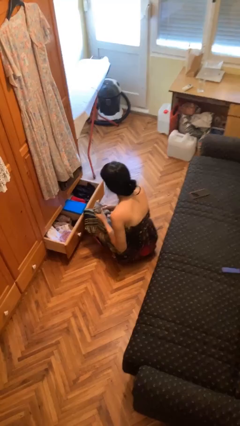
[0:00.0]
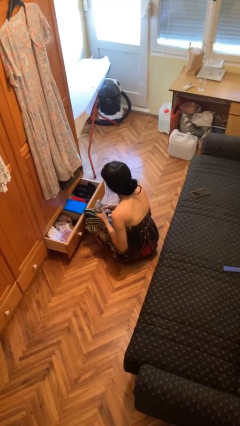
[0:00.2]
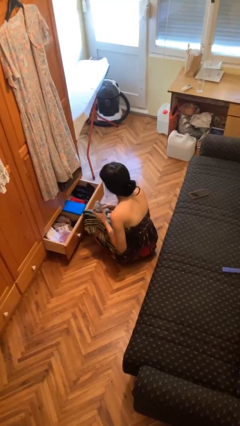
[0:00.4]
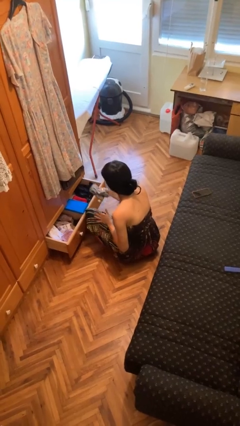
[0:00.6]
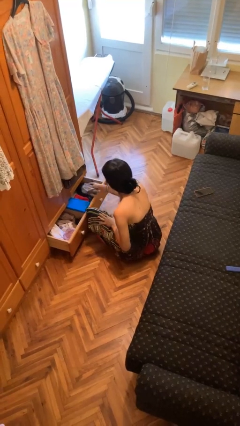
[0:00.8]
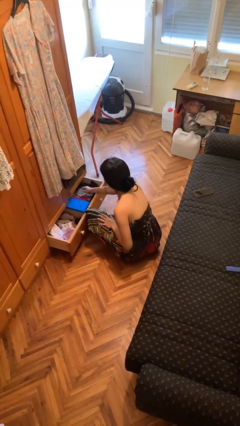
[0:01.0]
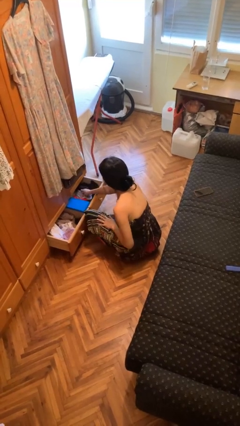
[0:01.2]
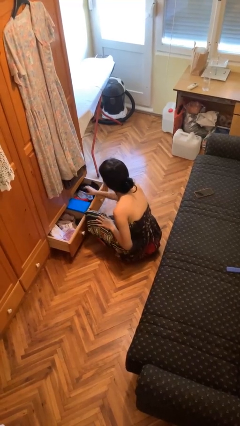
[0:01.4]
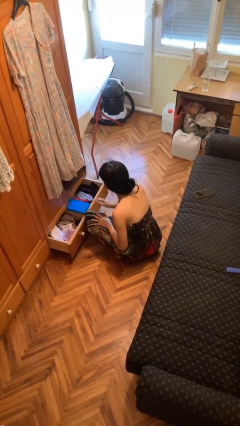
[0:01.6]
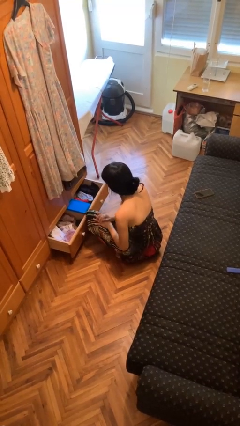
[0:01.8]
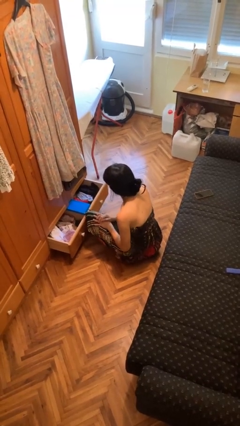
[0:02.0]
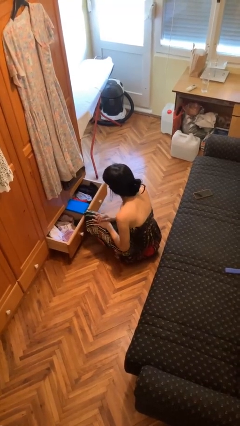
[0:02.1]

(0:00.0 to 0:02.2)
person puts clothes into dresser

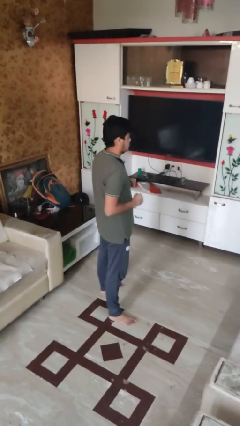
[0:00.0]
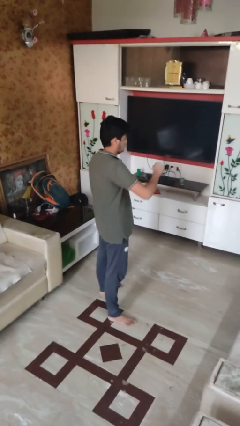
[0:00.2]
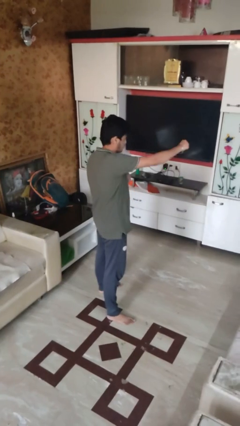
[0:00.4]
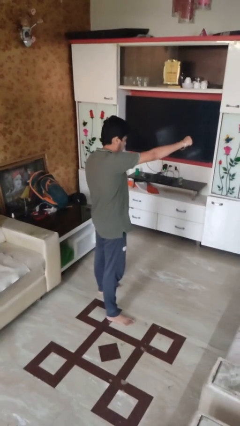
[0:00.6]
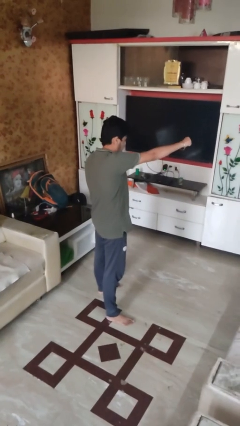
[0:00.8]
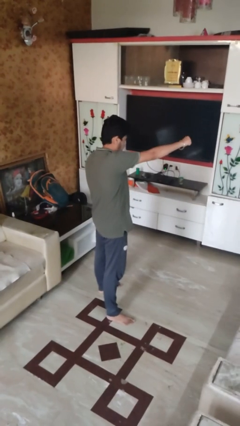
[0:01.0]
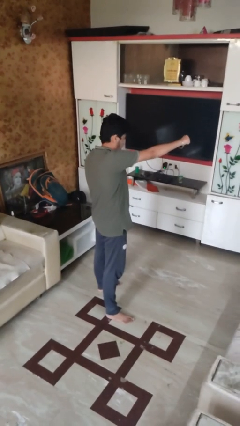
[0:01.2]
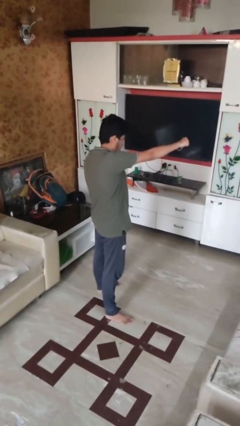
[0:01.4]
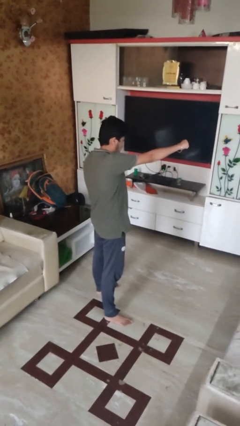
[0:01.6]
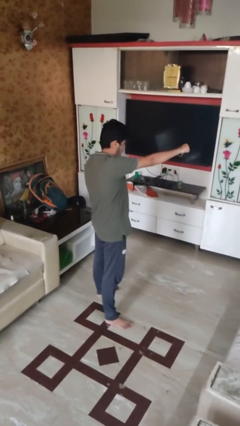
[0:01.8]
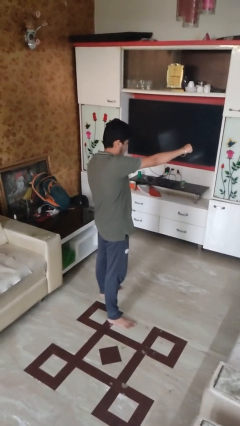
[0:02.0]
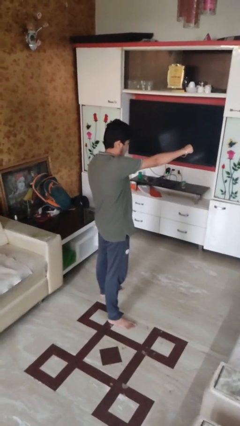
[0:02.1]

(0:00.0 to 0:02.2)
person punches

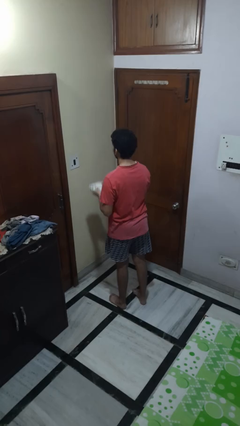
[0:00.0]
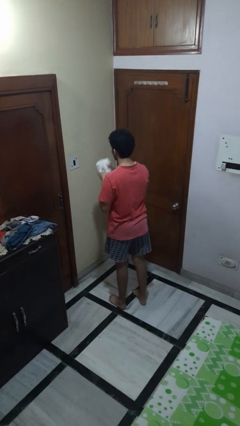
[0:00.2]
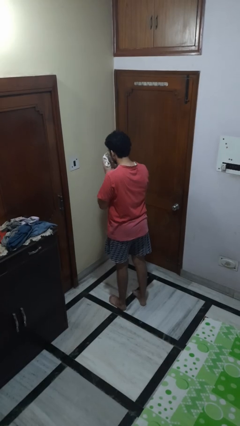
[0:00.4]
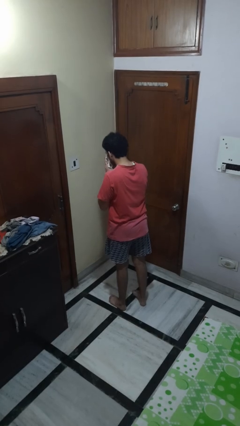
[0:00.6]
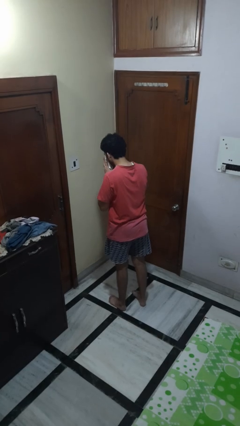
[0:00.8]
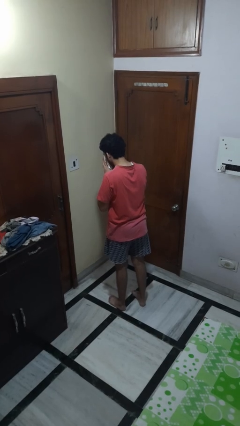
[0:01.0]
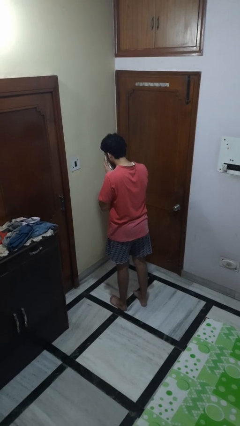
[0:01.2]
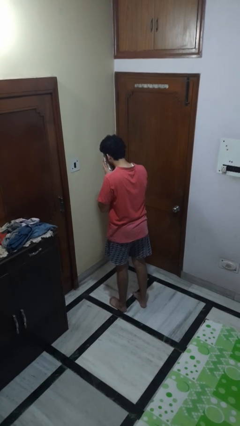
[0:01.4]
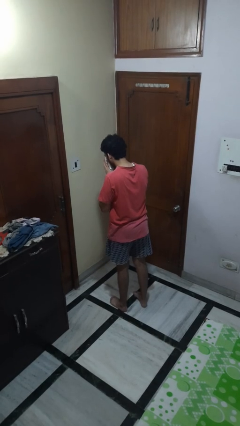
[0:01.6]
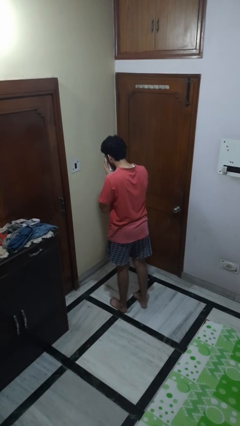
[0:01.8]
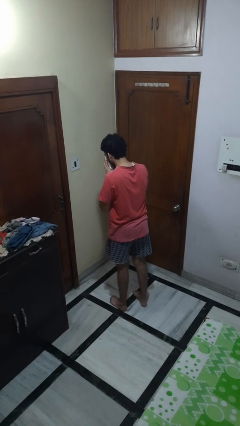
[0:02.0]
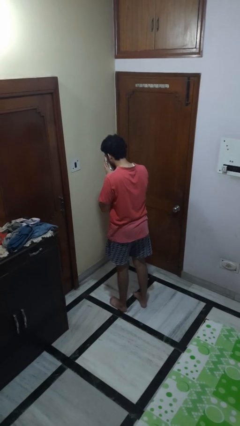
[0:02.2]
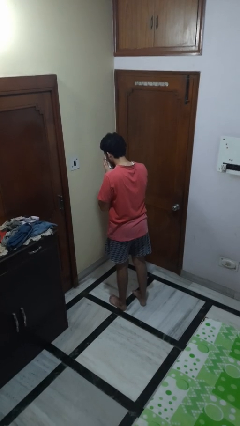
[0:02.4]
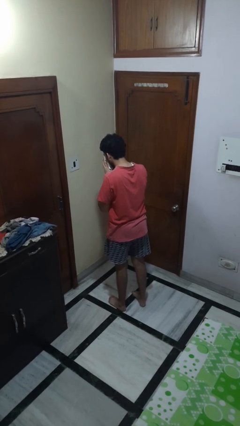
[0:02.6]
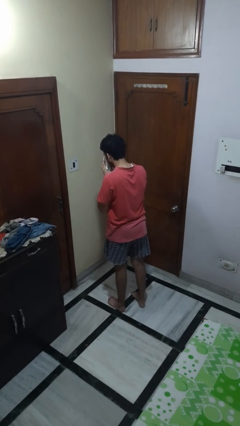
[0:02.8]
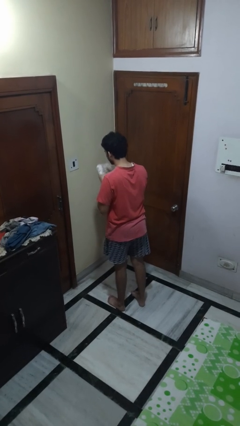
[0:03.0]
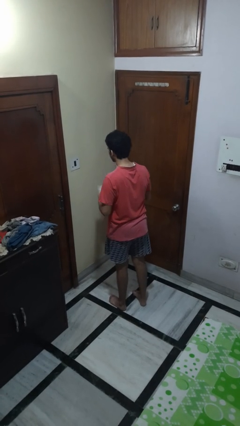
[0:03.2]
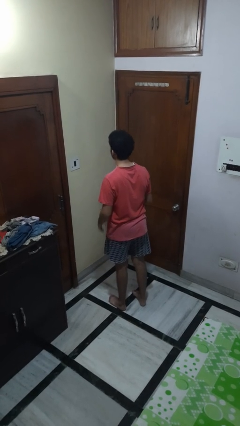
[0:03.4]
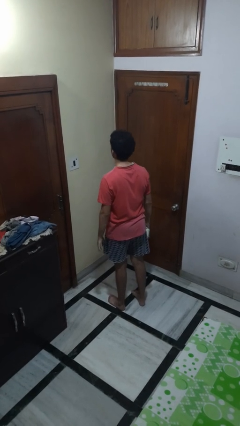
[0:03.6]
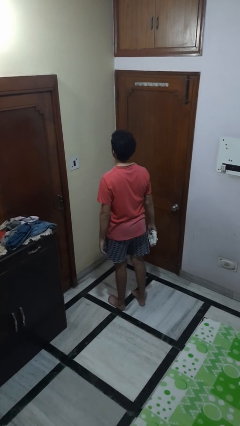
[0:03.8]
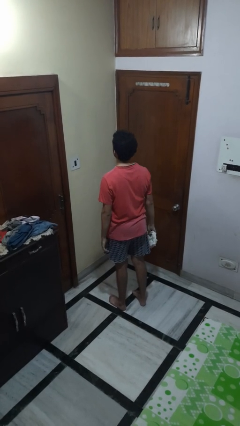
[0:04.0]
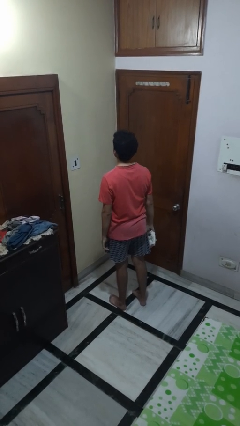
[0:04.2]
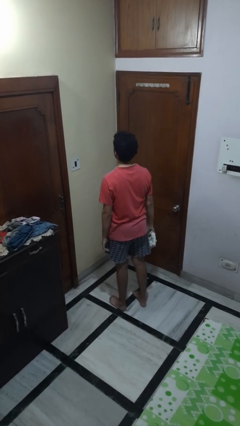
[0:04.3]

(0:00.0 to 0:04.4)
person blows nose

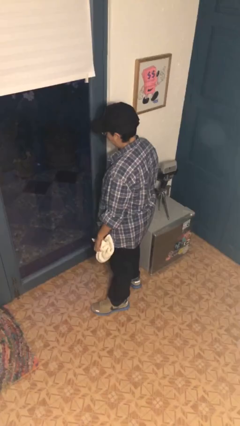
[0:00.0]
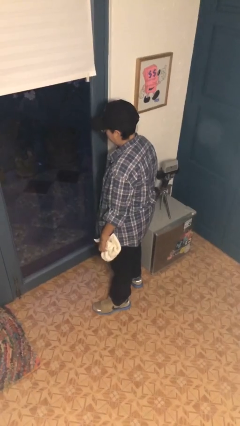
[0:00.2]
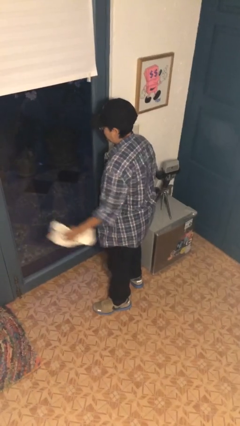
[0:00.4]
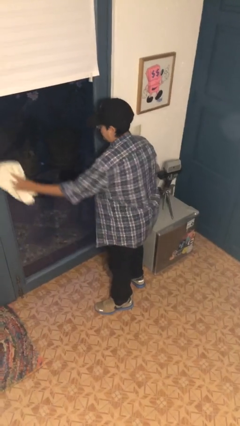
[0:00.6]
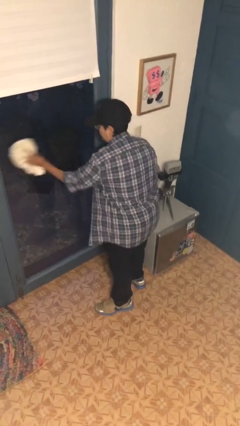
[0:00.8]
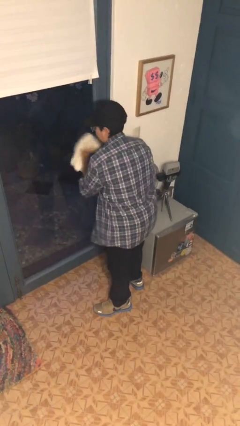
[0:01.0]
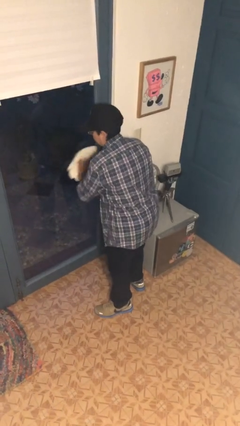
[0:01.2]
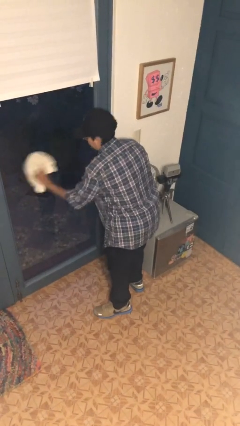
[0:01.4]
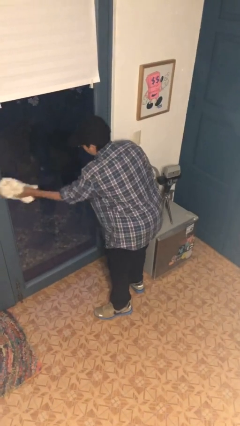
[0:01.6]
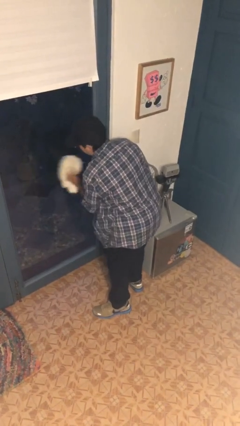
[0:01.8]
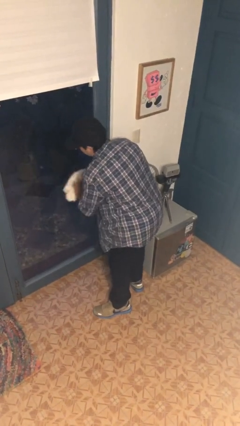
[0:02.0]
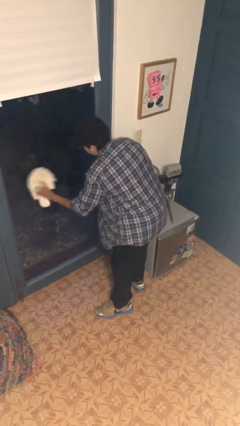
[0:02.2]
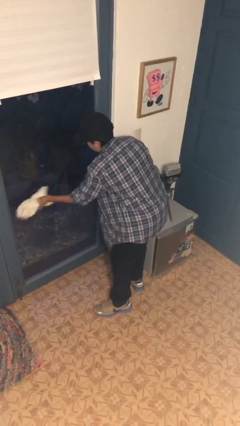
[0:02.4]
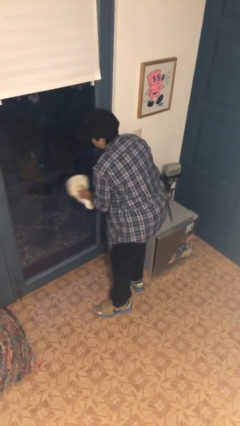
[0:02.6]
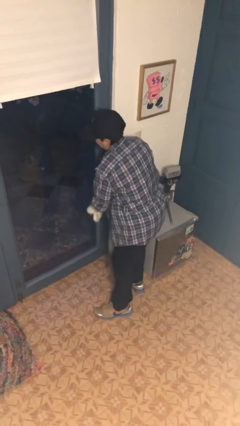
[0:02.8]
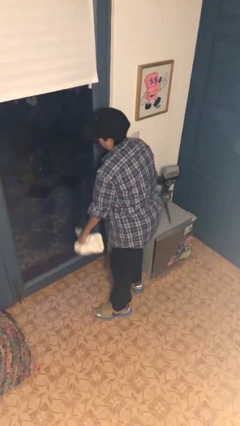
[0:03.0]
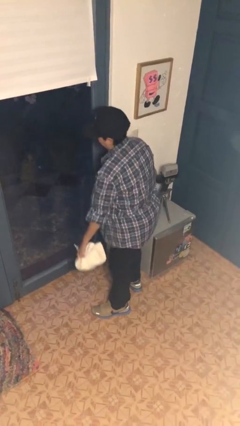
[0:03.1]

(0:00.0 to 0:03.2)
person washes window

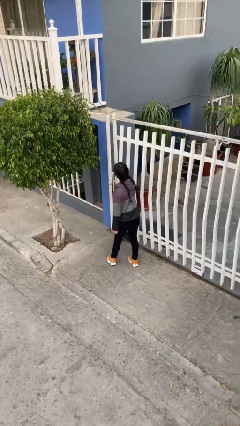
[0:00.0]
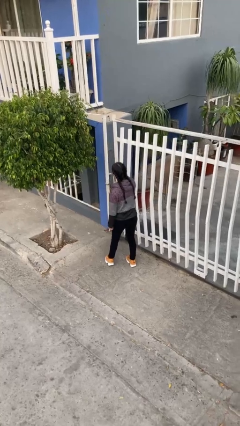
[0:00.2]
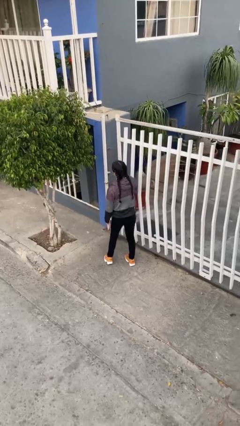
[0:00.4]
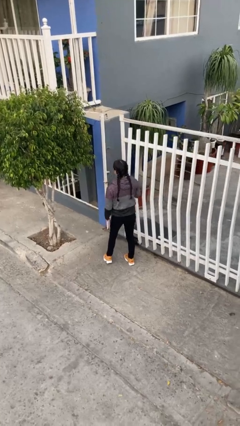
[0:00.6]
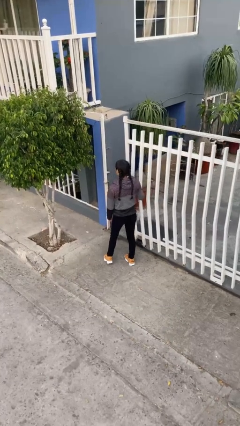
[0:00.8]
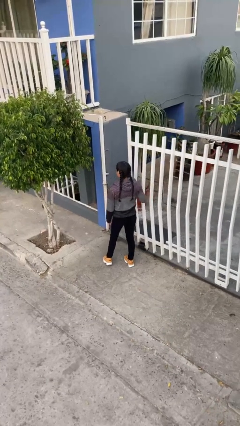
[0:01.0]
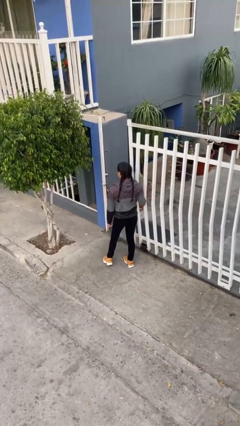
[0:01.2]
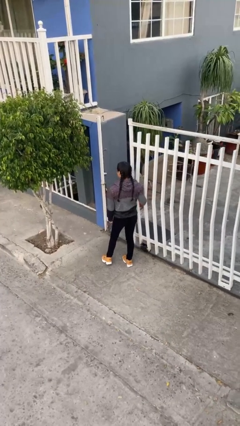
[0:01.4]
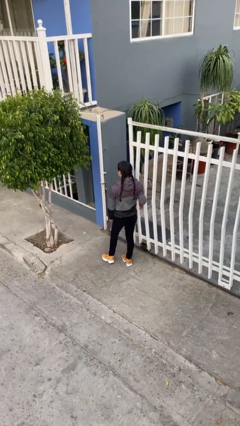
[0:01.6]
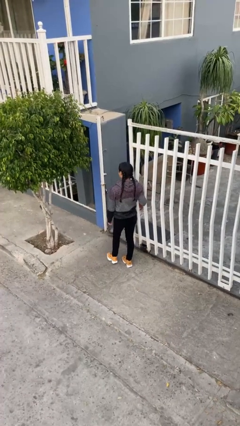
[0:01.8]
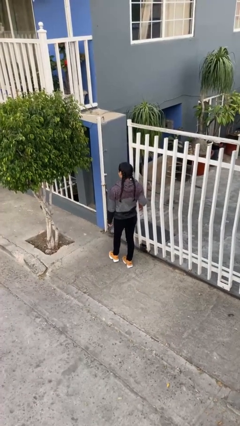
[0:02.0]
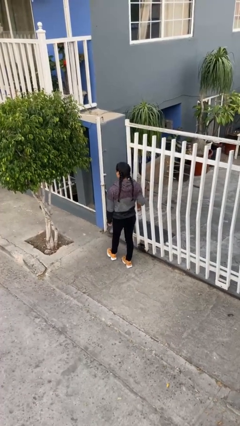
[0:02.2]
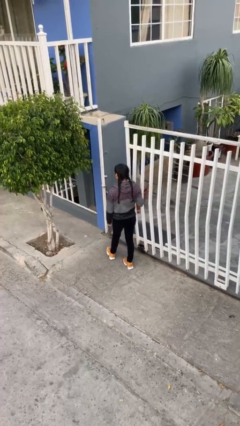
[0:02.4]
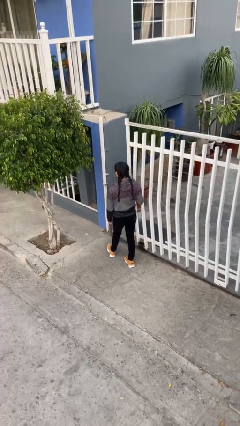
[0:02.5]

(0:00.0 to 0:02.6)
person opens facility door

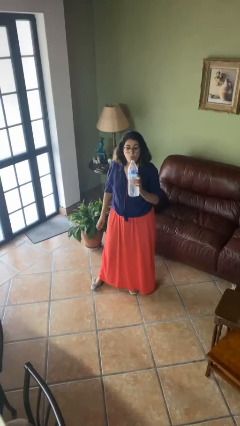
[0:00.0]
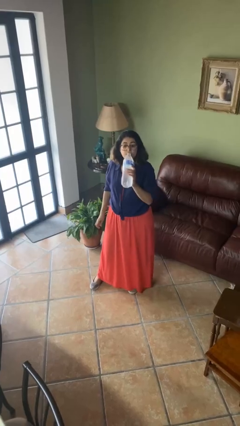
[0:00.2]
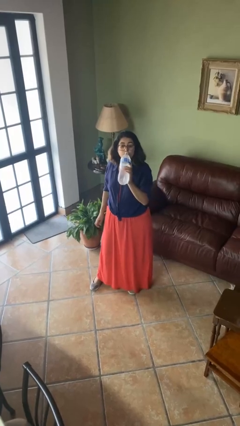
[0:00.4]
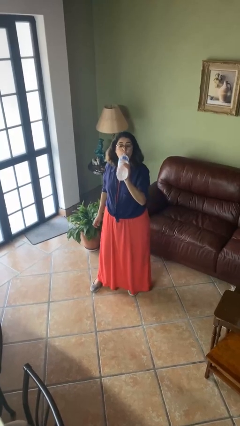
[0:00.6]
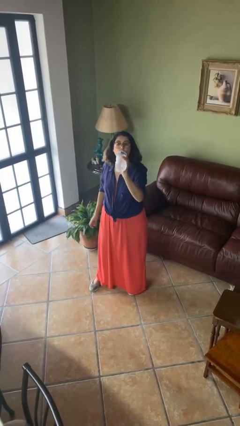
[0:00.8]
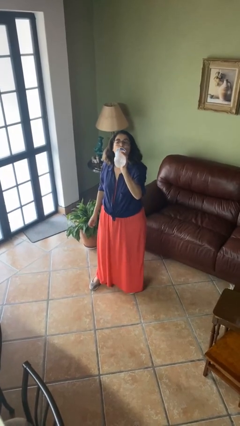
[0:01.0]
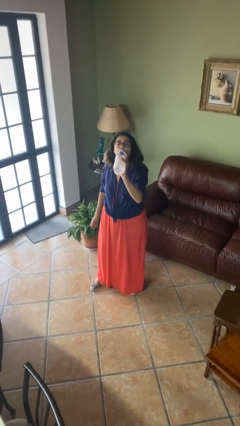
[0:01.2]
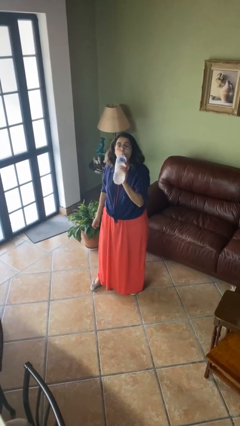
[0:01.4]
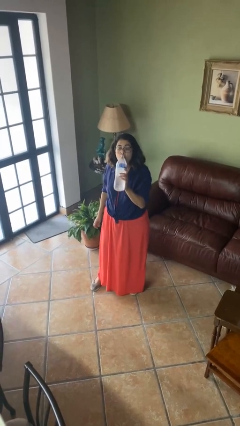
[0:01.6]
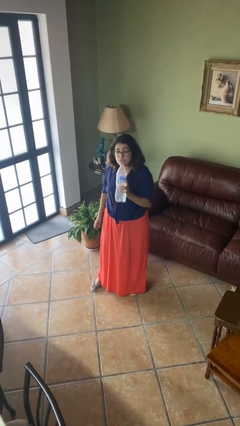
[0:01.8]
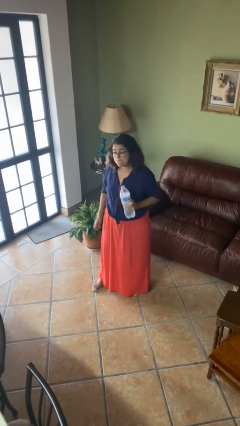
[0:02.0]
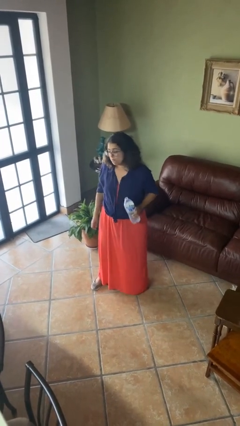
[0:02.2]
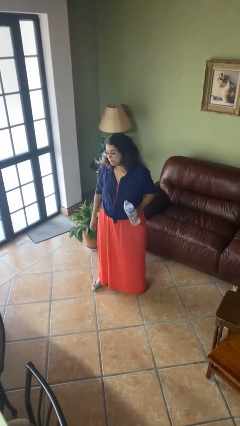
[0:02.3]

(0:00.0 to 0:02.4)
person drinks from bottle

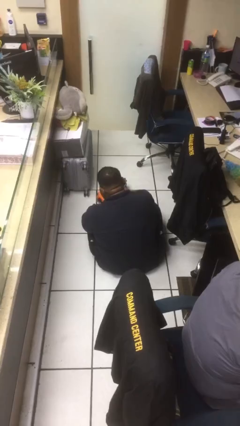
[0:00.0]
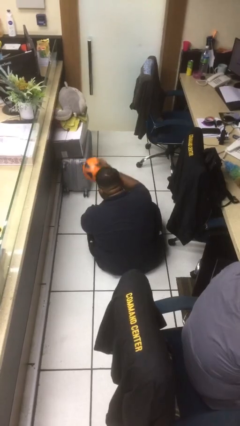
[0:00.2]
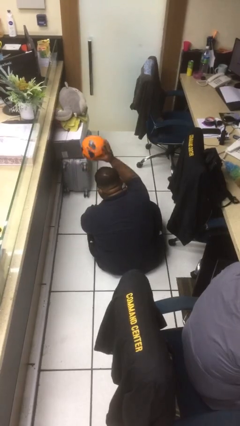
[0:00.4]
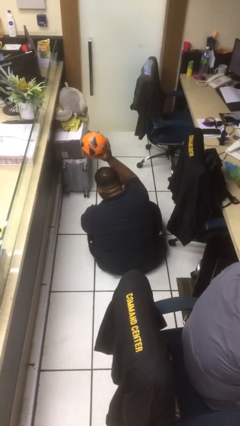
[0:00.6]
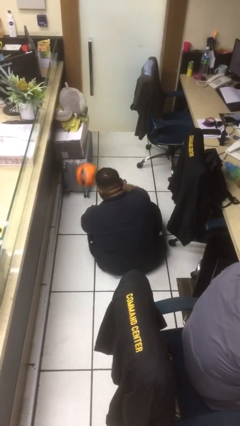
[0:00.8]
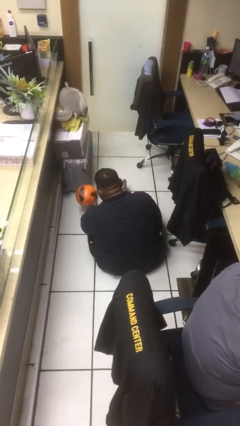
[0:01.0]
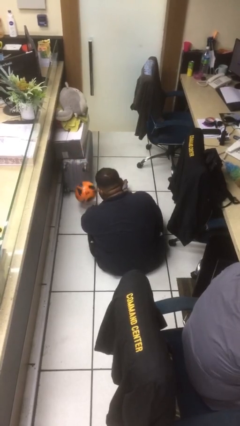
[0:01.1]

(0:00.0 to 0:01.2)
person bounces ball on floor
